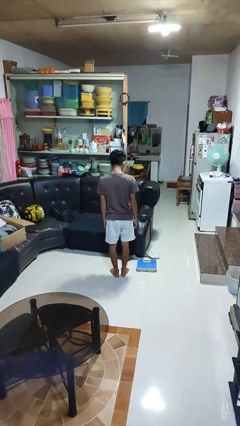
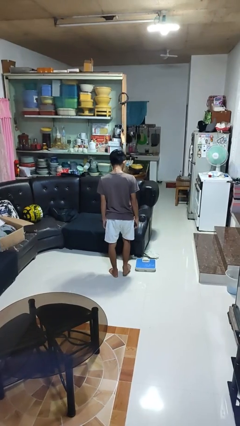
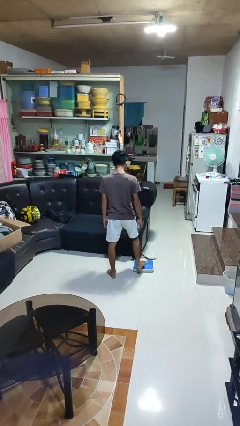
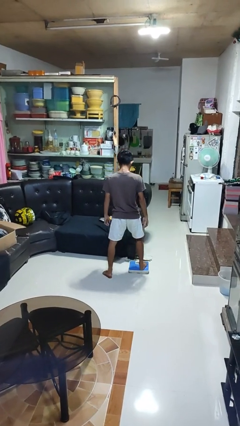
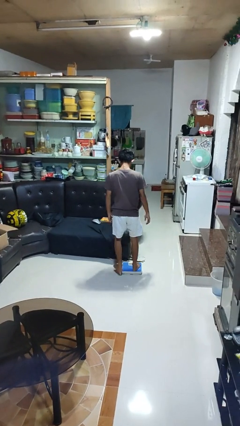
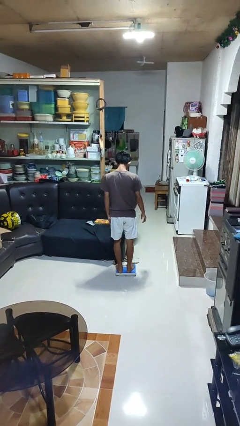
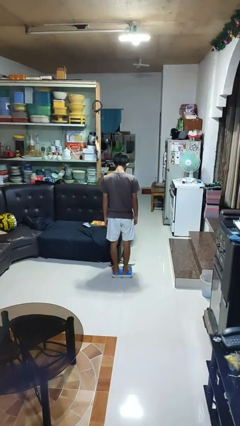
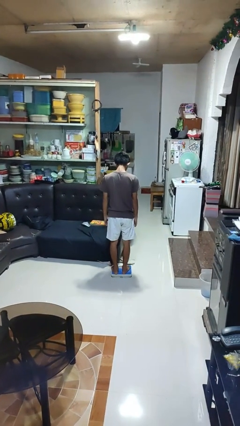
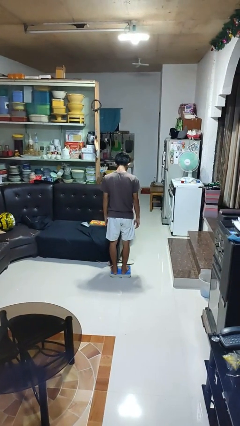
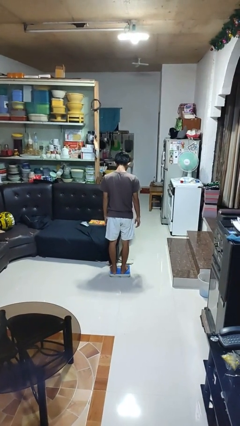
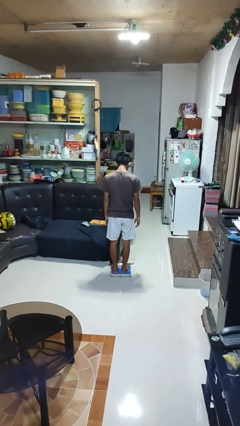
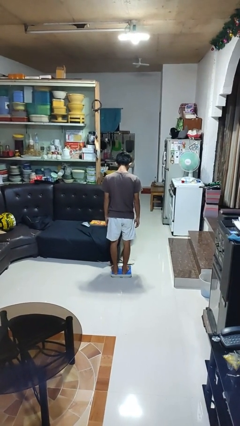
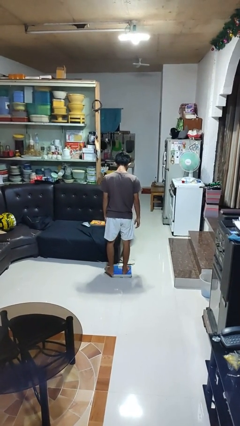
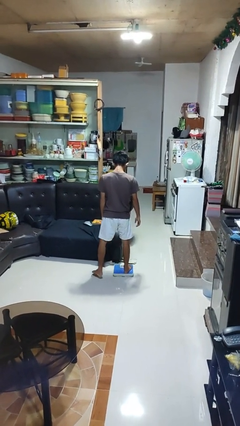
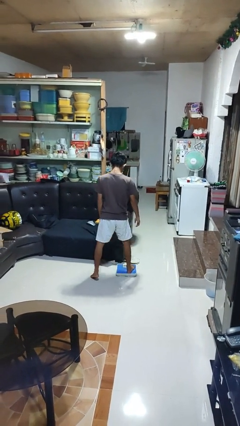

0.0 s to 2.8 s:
person uses bodyweight scale

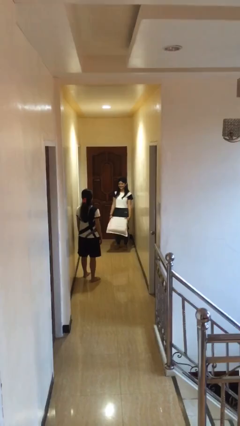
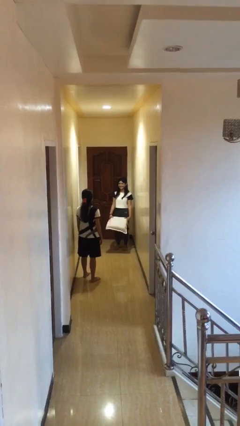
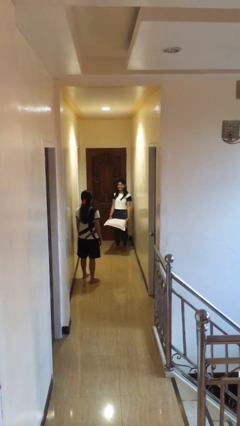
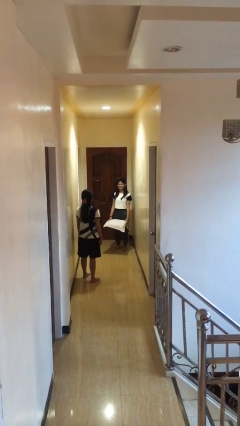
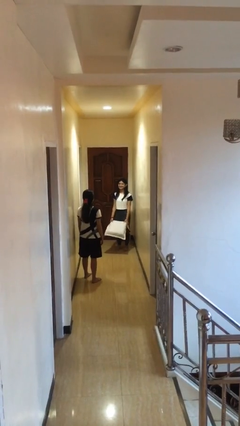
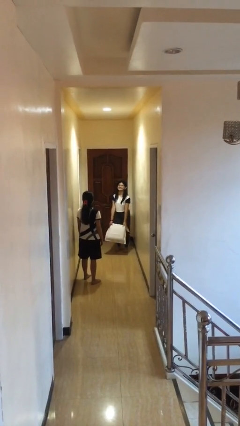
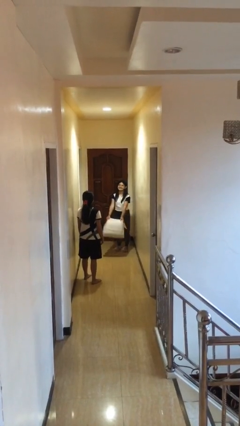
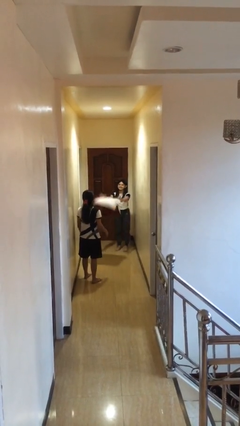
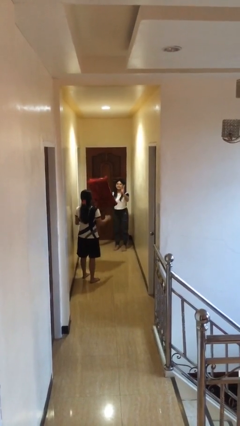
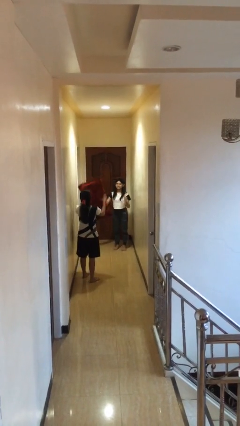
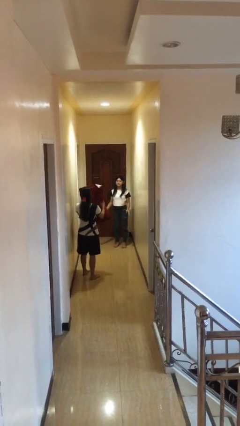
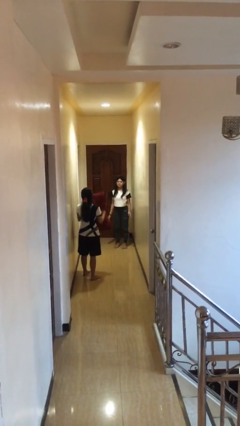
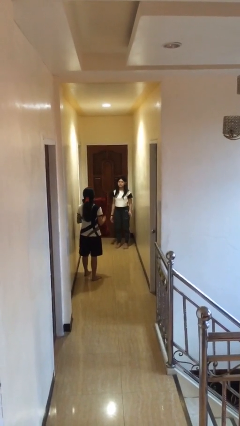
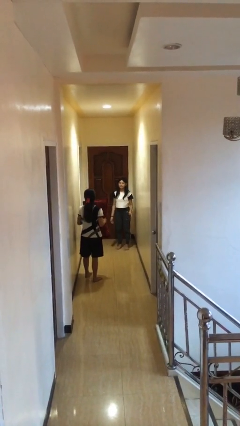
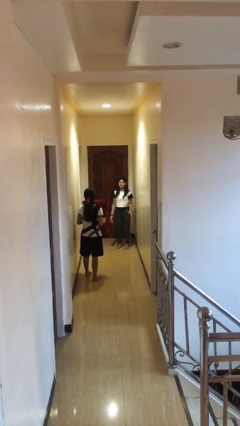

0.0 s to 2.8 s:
person throws object to person

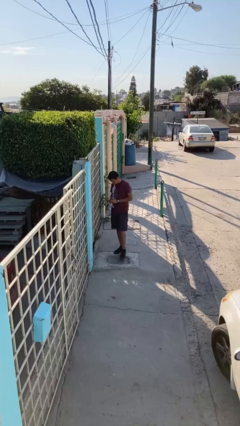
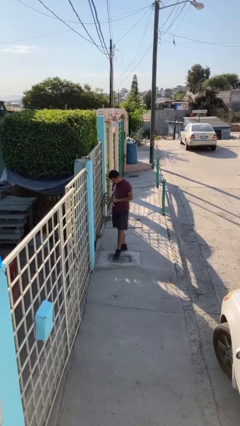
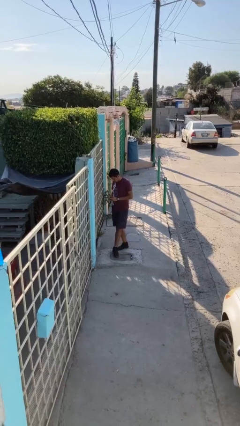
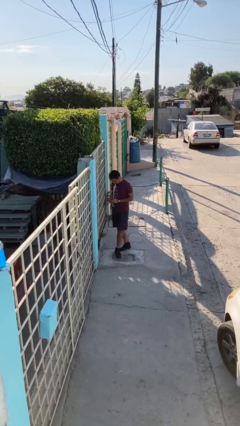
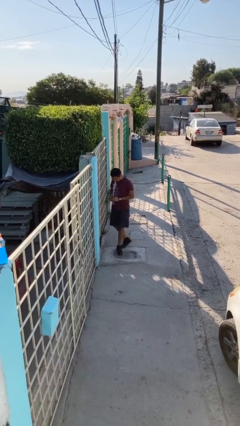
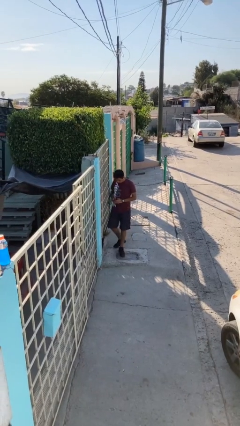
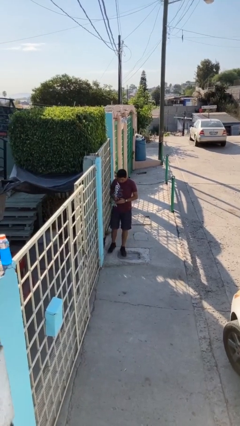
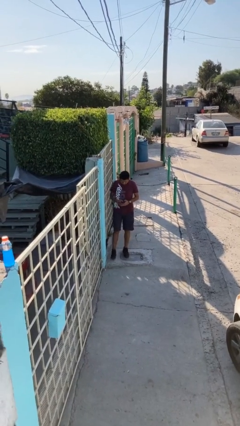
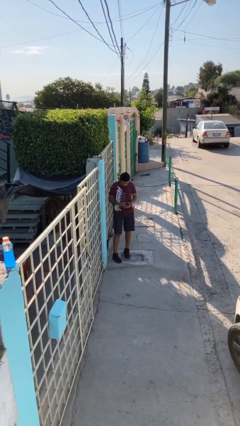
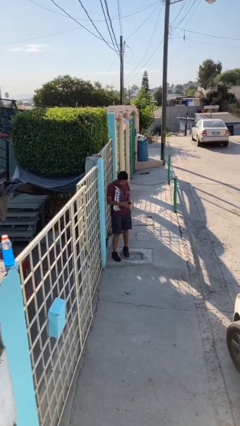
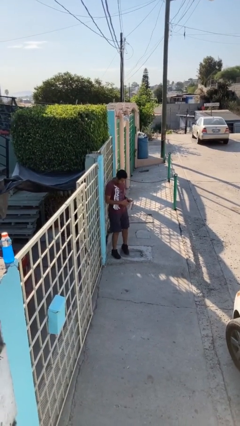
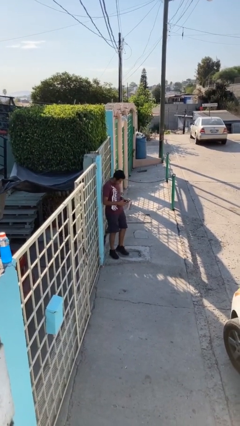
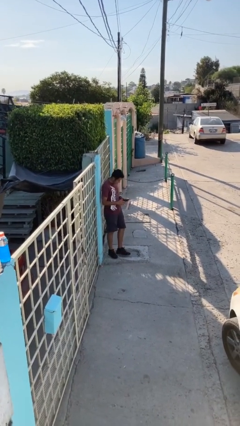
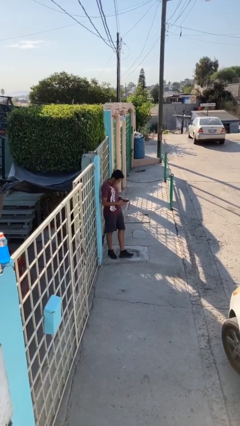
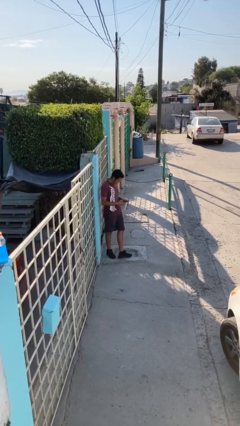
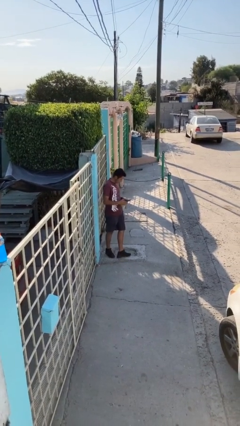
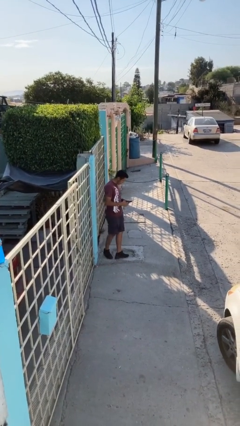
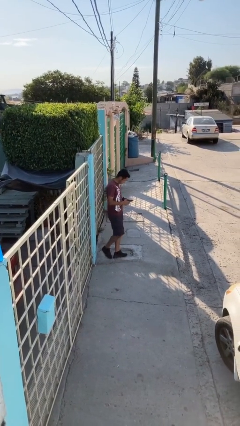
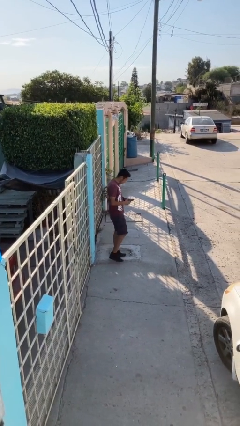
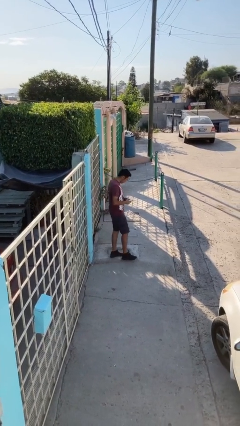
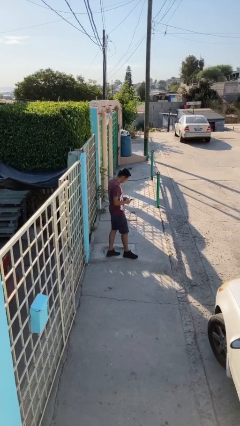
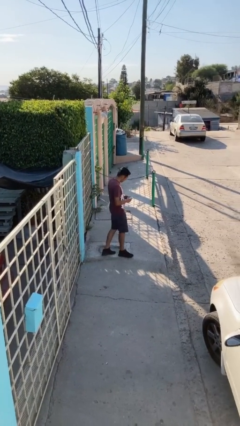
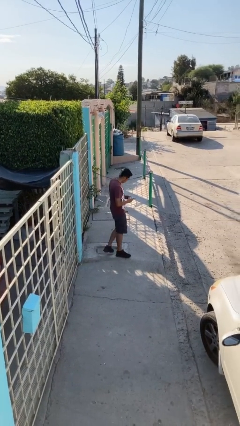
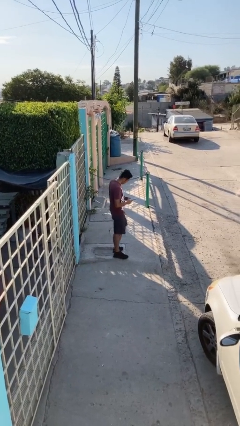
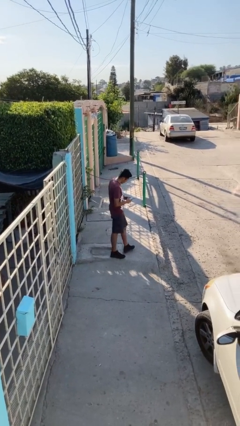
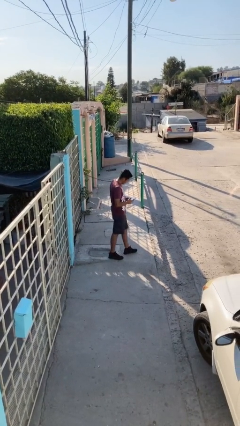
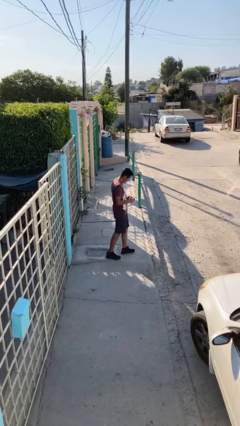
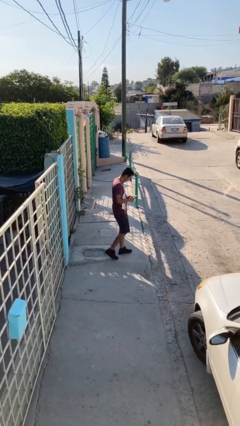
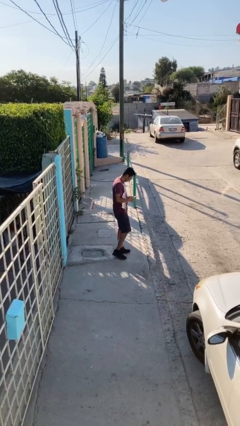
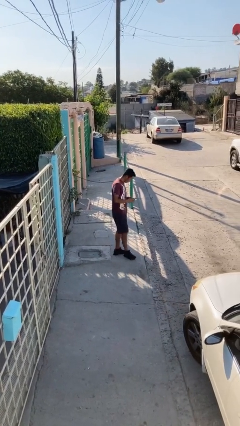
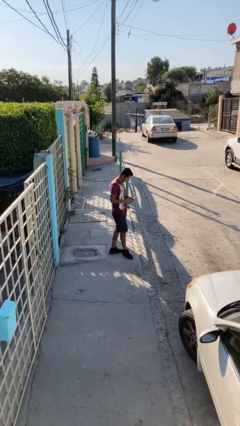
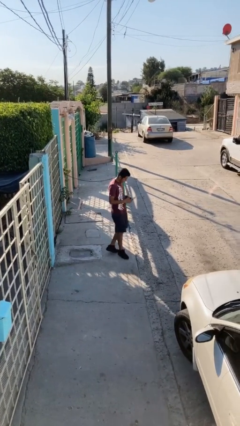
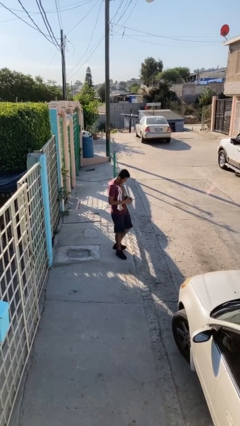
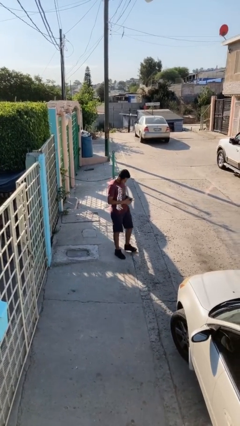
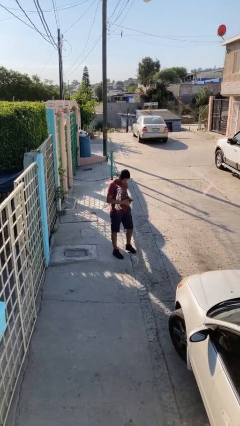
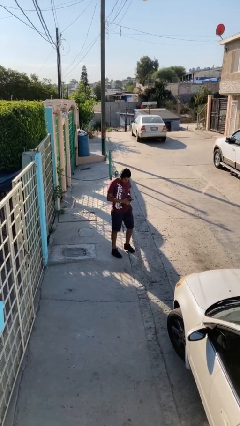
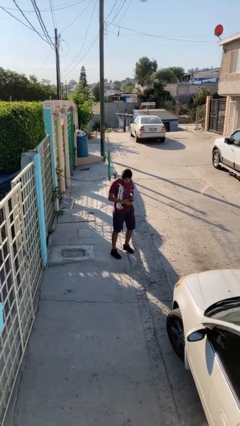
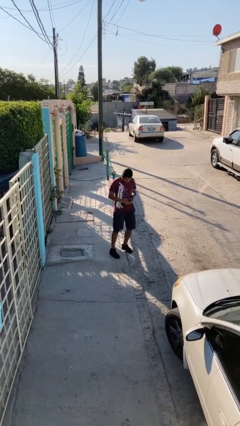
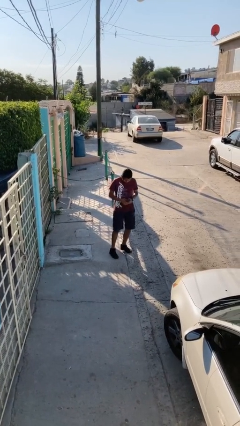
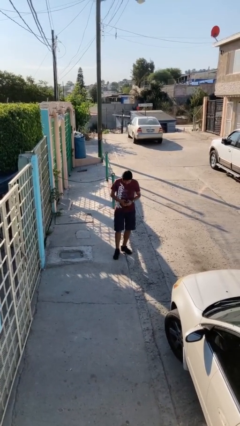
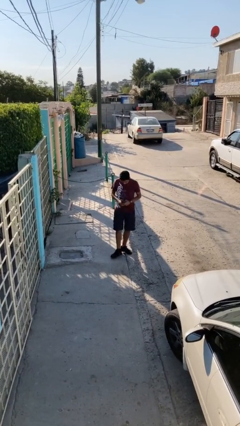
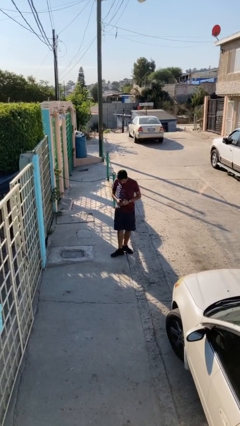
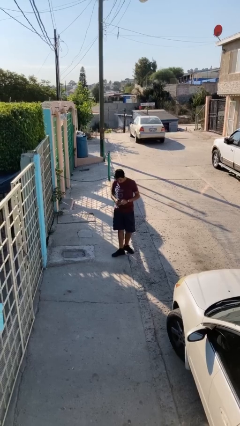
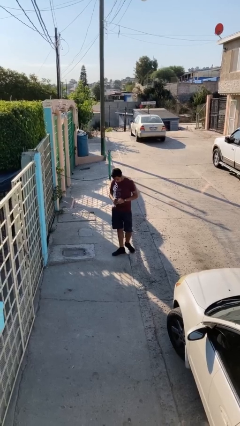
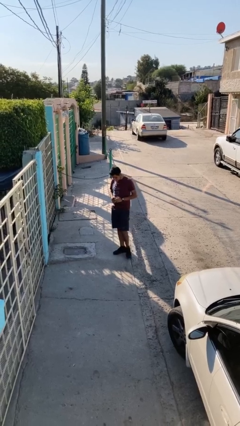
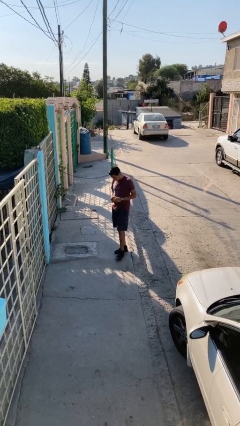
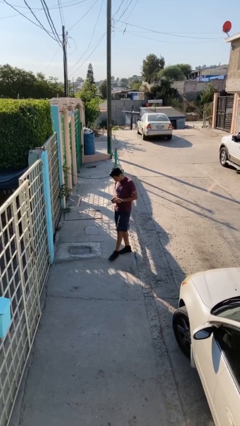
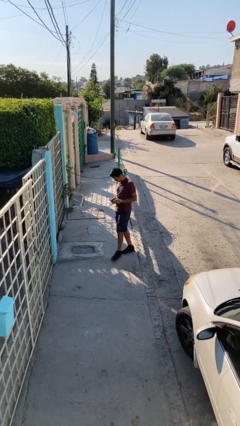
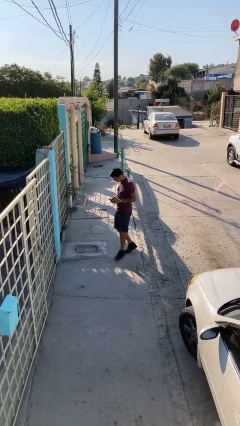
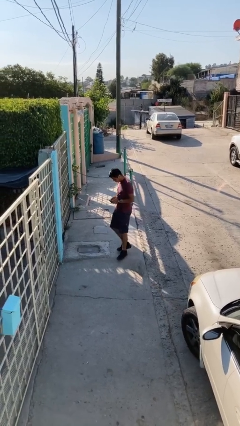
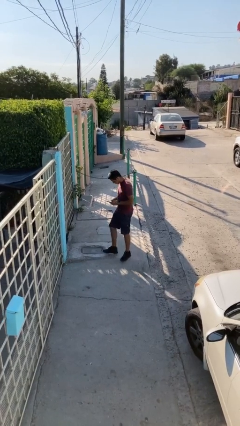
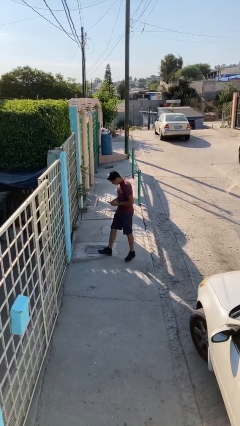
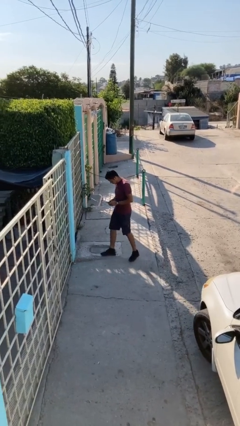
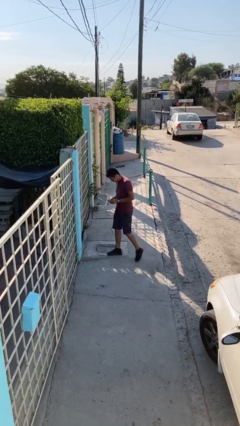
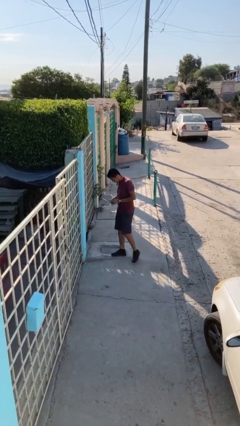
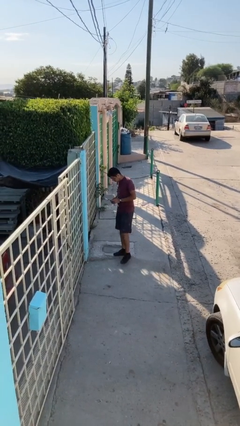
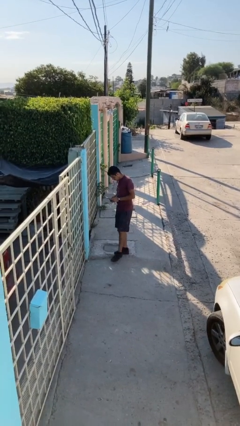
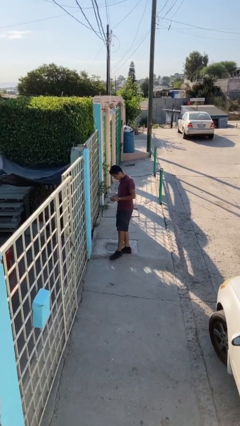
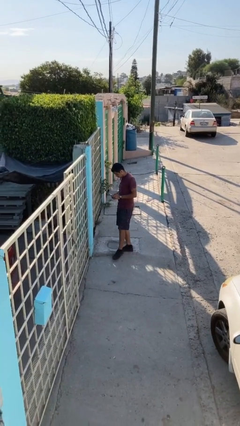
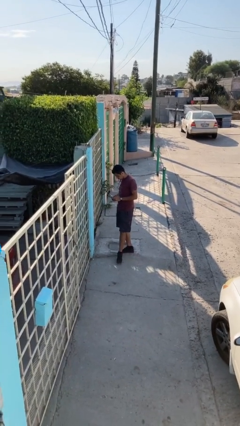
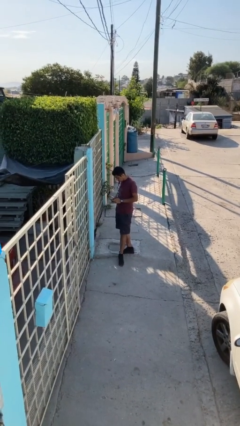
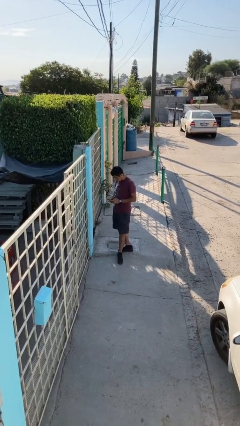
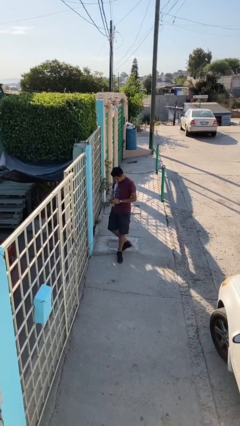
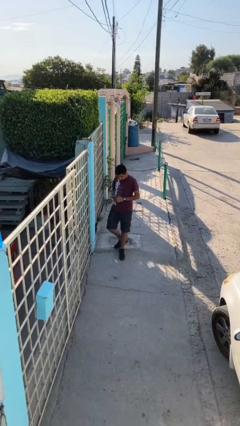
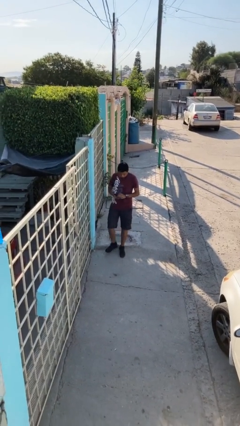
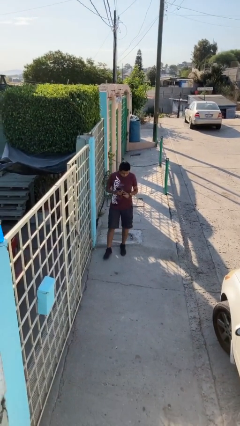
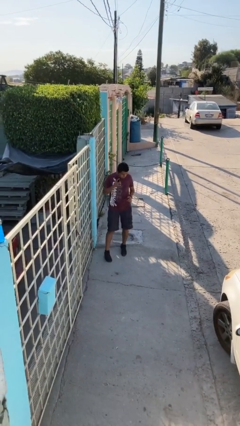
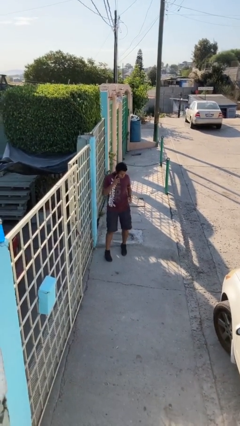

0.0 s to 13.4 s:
person texts on phone
